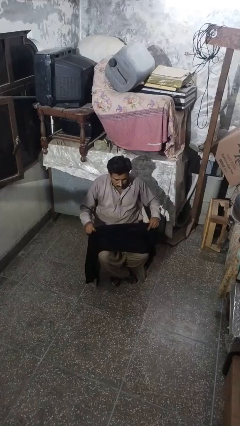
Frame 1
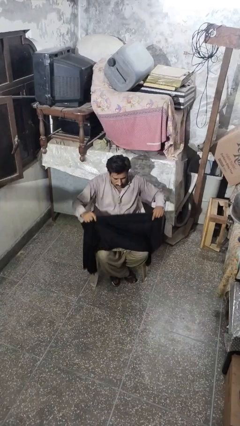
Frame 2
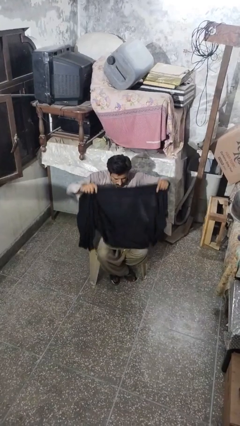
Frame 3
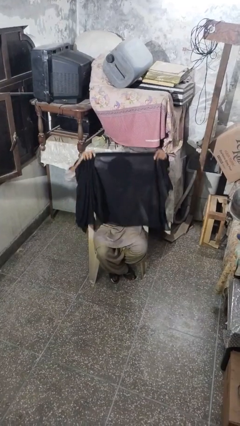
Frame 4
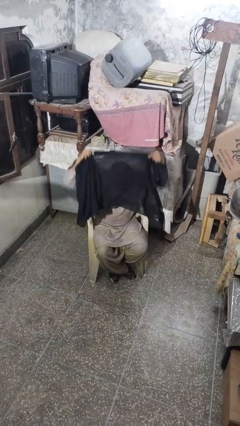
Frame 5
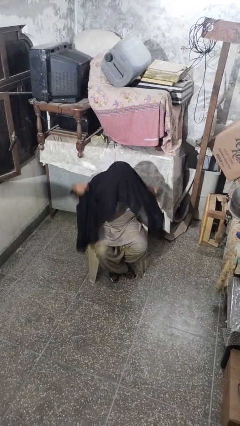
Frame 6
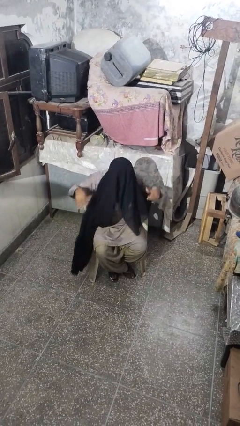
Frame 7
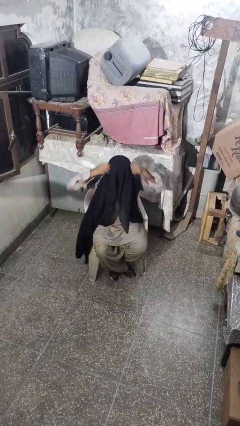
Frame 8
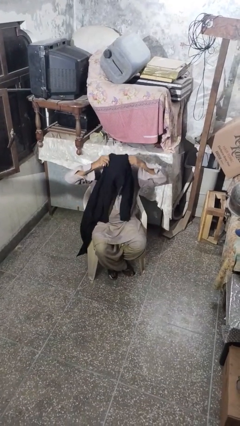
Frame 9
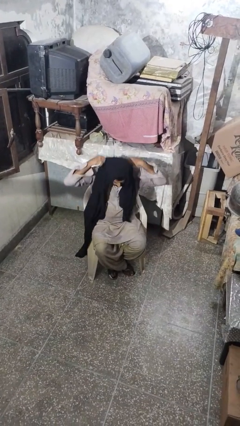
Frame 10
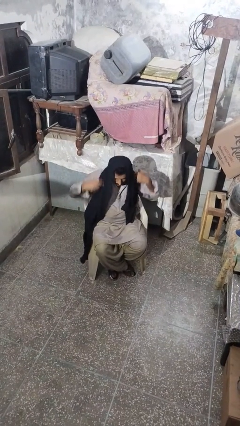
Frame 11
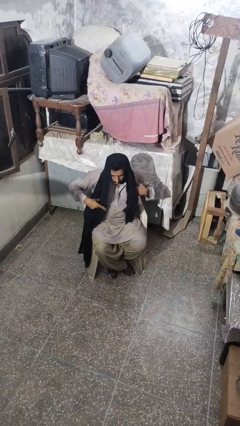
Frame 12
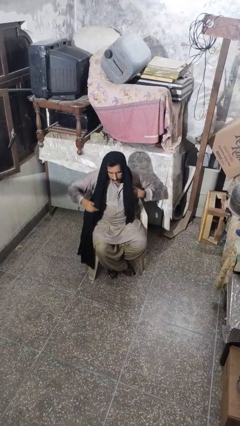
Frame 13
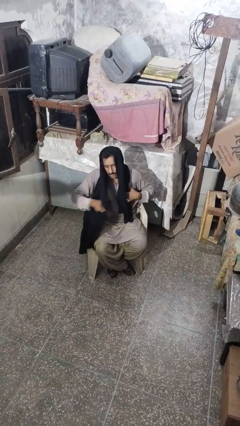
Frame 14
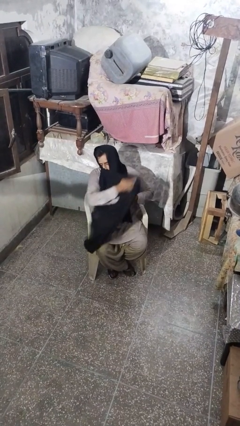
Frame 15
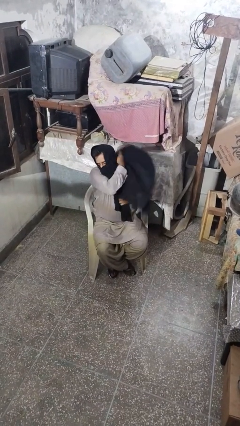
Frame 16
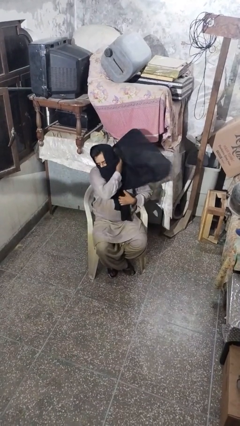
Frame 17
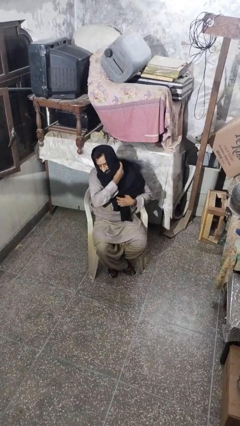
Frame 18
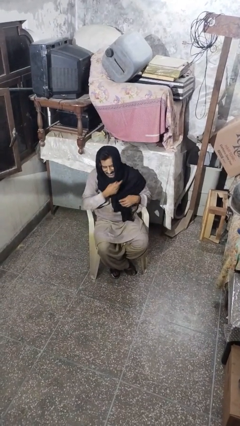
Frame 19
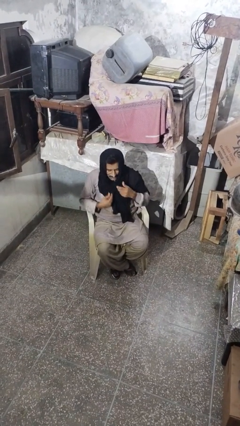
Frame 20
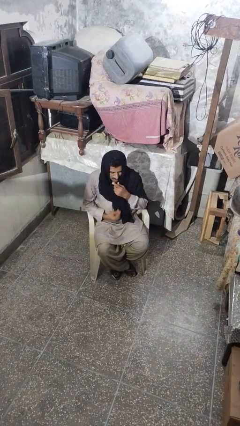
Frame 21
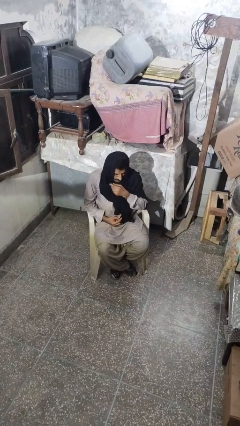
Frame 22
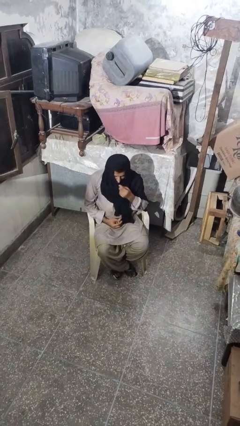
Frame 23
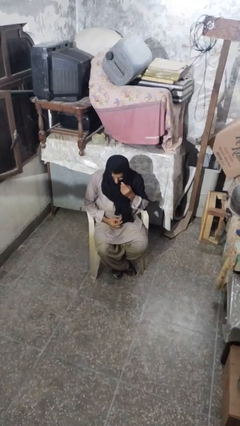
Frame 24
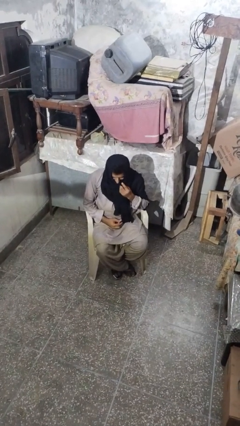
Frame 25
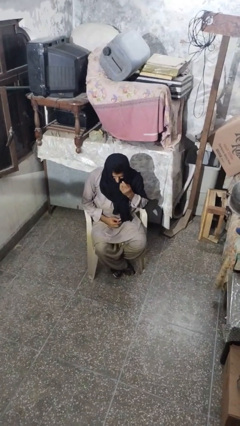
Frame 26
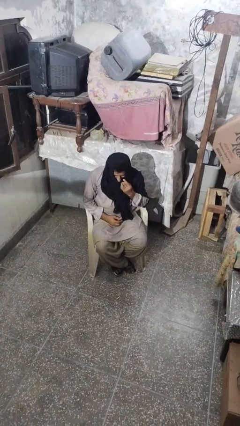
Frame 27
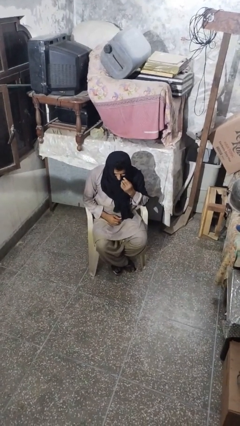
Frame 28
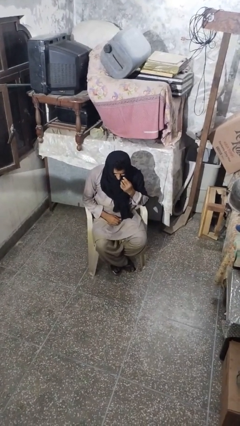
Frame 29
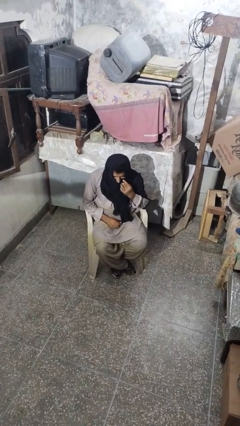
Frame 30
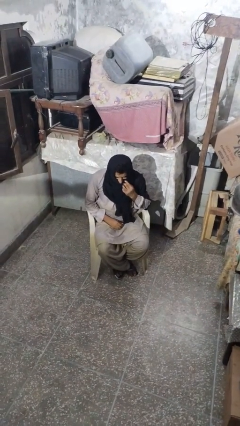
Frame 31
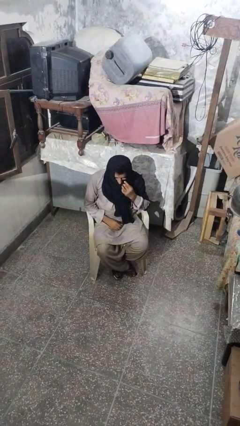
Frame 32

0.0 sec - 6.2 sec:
person puts on scarf

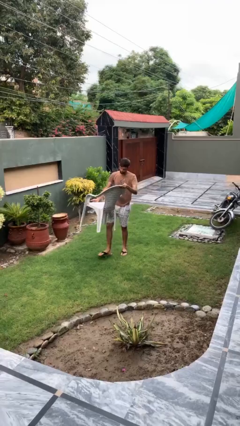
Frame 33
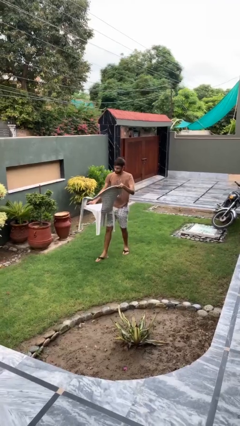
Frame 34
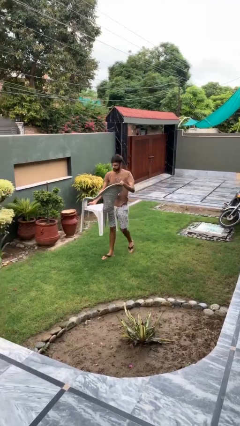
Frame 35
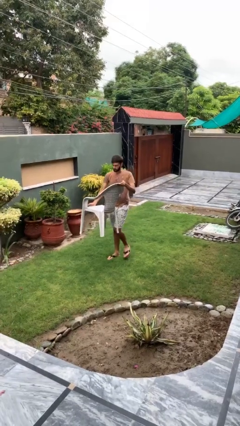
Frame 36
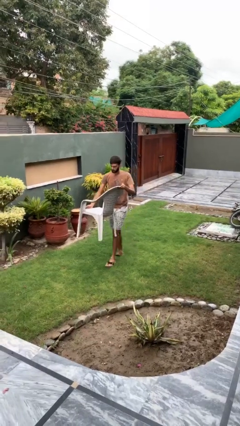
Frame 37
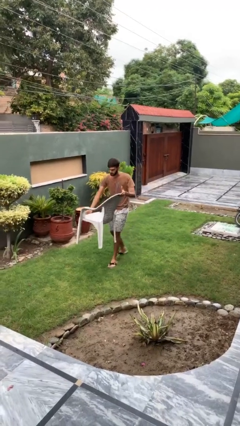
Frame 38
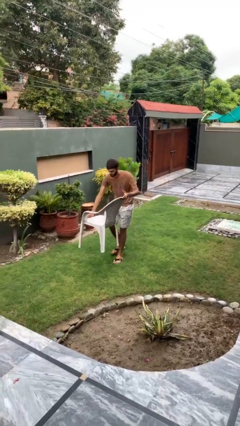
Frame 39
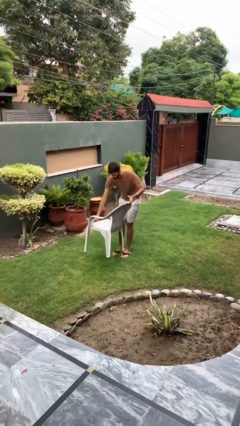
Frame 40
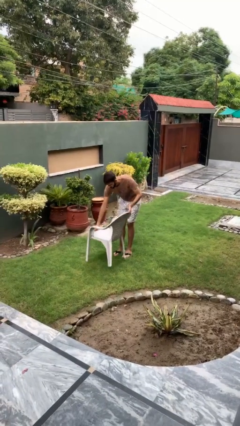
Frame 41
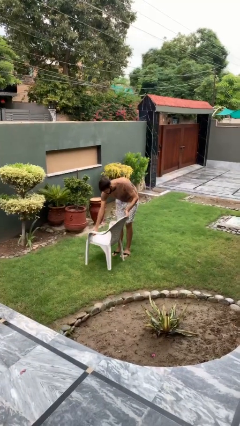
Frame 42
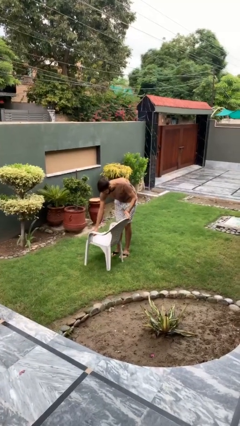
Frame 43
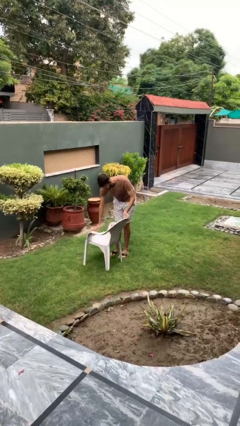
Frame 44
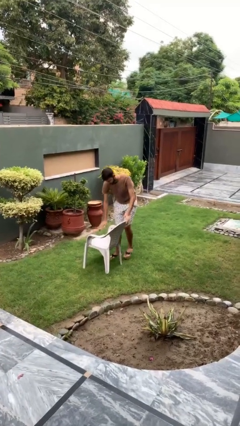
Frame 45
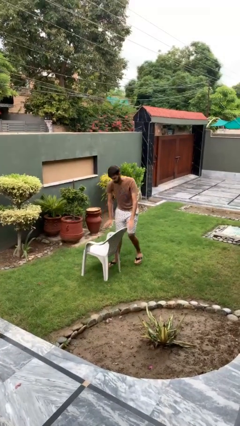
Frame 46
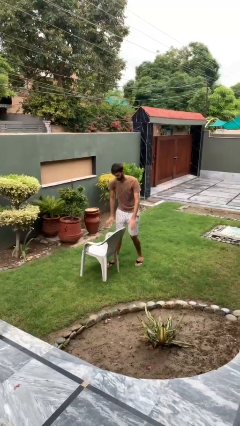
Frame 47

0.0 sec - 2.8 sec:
person puts down object on floor

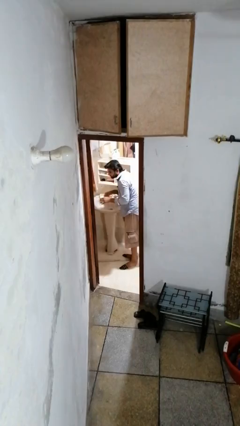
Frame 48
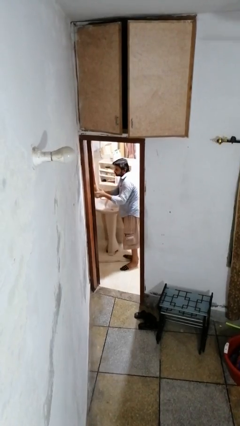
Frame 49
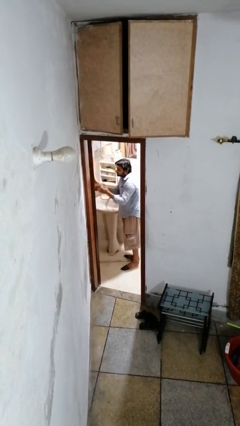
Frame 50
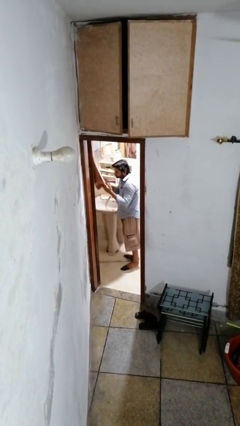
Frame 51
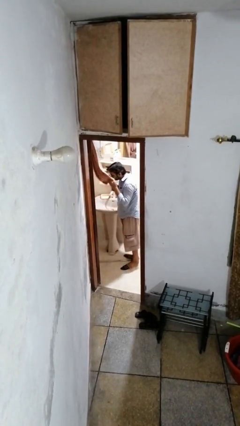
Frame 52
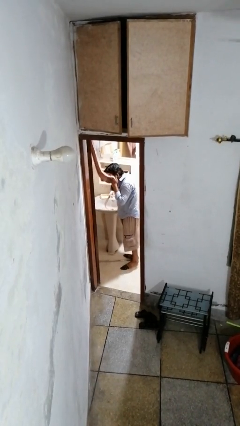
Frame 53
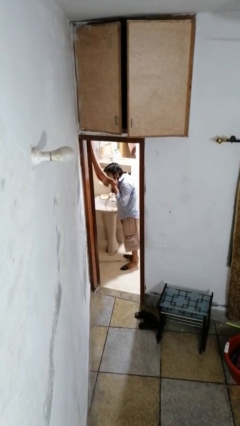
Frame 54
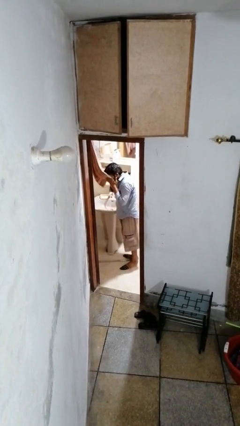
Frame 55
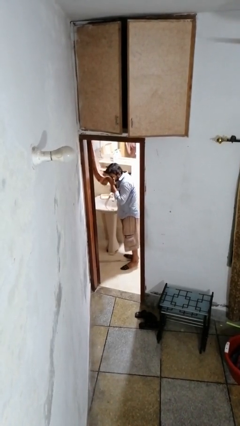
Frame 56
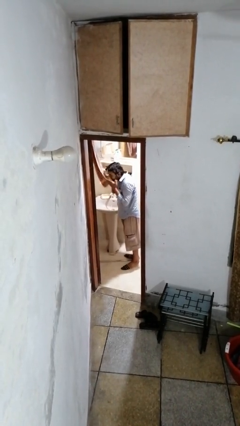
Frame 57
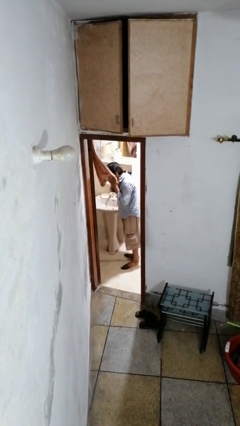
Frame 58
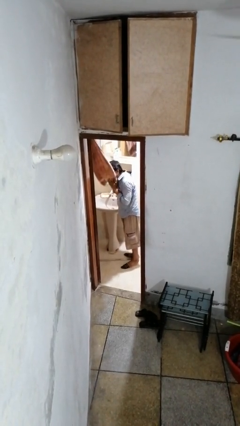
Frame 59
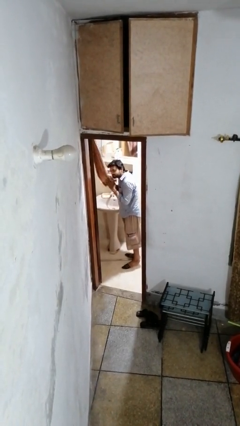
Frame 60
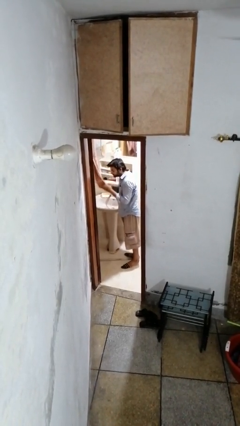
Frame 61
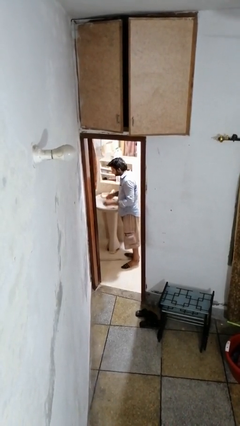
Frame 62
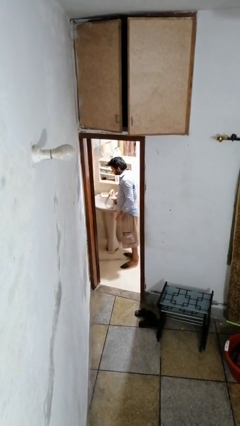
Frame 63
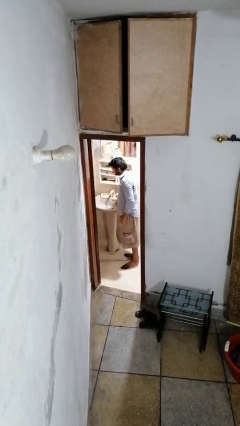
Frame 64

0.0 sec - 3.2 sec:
person dries face with towel

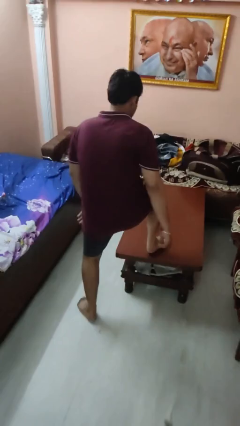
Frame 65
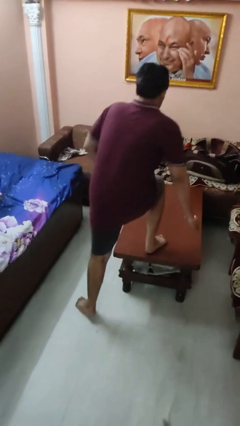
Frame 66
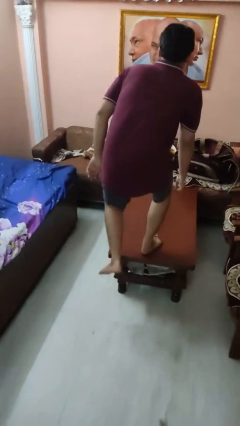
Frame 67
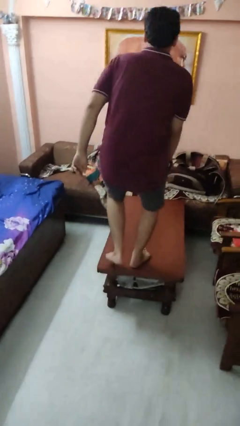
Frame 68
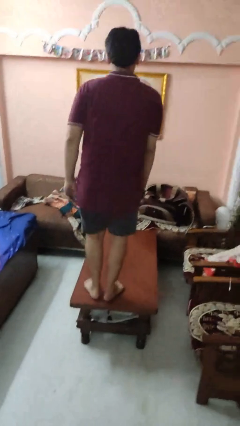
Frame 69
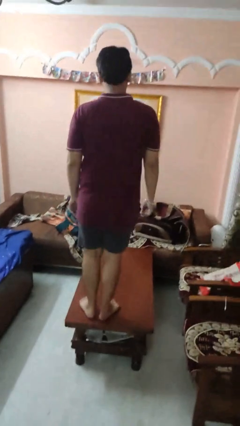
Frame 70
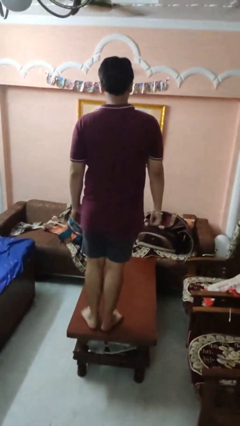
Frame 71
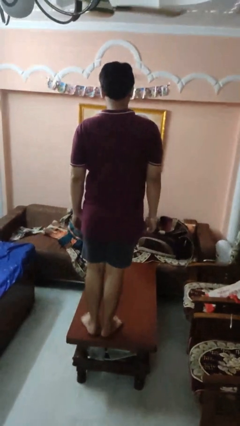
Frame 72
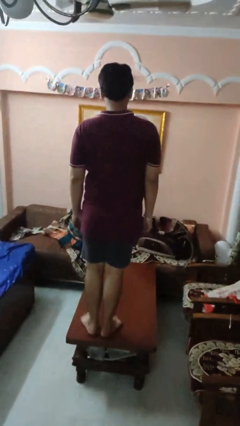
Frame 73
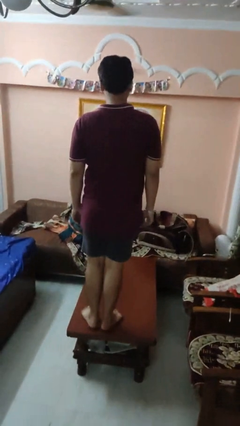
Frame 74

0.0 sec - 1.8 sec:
person climbs on table

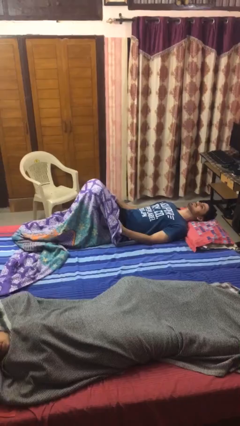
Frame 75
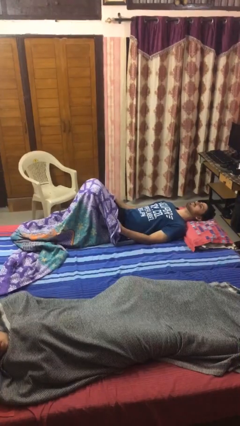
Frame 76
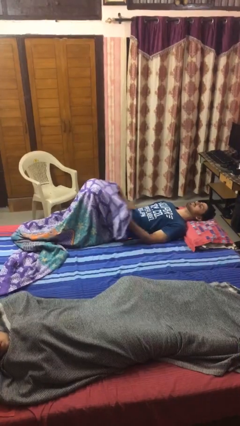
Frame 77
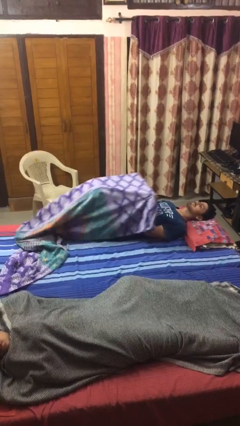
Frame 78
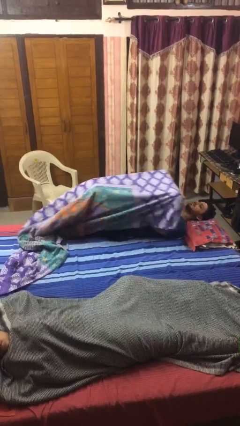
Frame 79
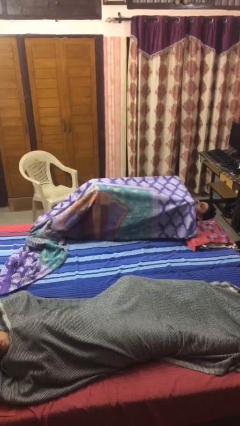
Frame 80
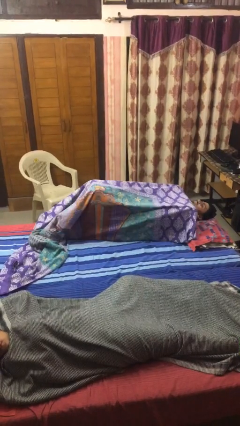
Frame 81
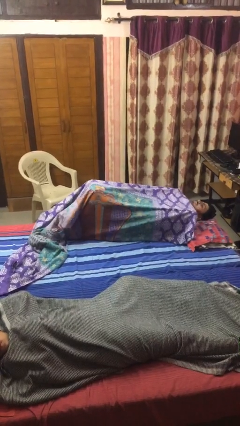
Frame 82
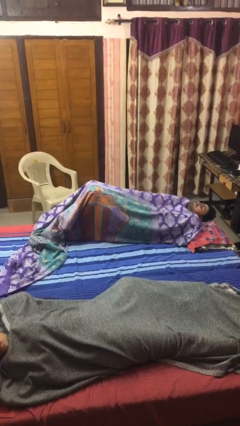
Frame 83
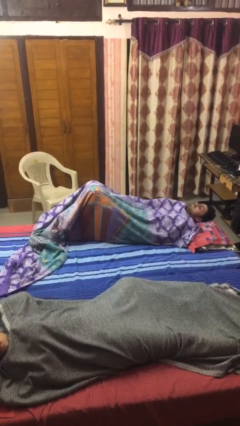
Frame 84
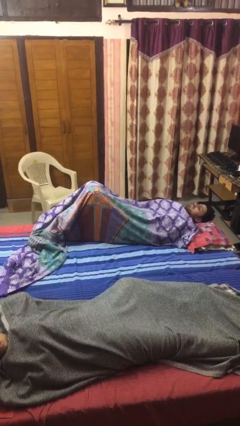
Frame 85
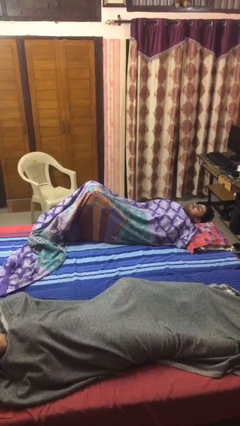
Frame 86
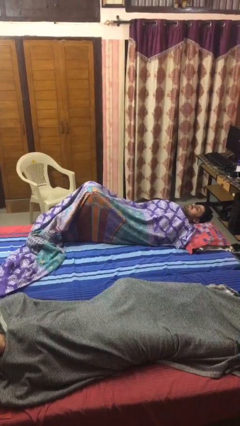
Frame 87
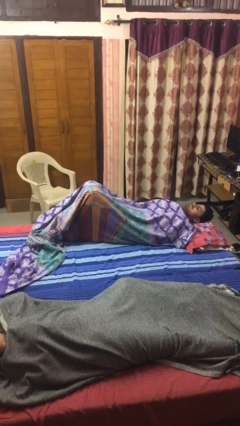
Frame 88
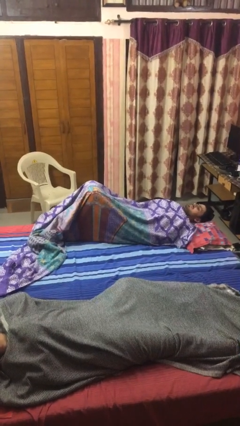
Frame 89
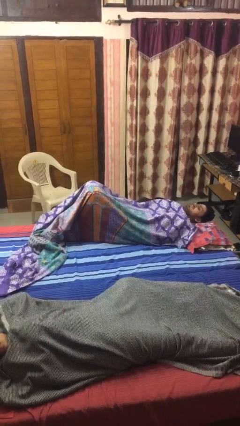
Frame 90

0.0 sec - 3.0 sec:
person covers with bedsheets

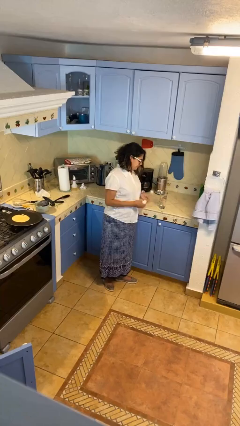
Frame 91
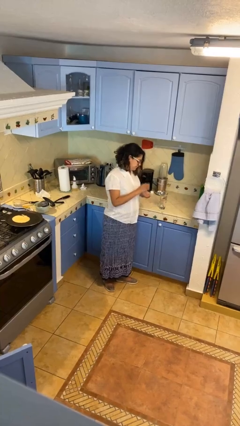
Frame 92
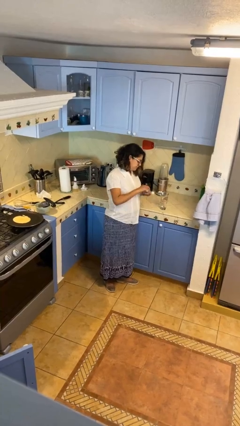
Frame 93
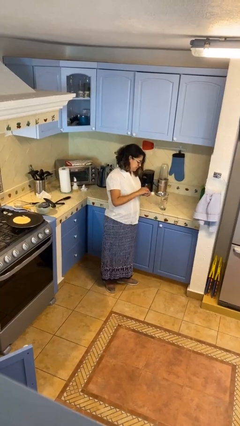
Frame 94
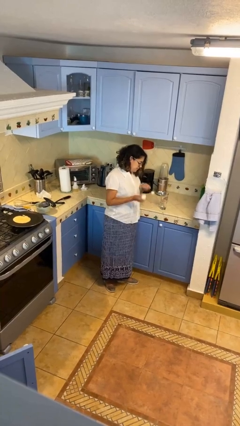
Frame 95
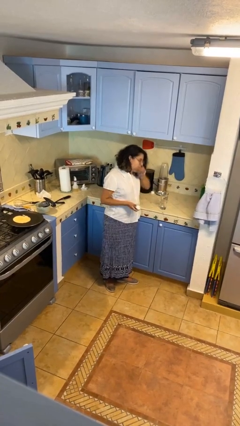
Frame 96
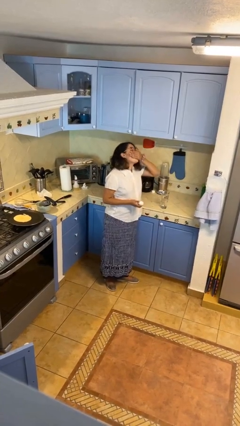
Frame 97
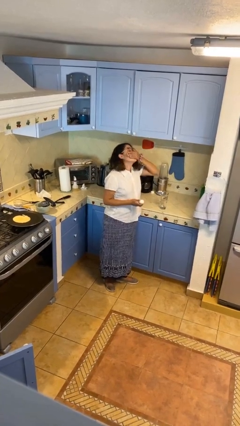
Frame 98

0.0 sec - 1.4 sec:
person takes medicine pills
